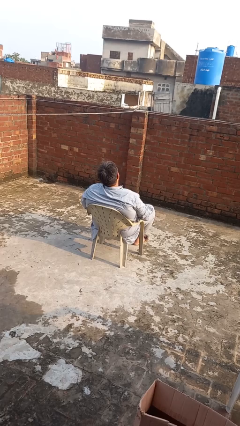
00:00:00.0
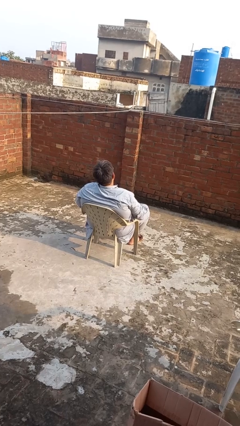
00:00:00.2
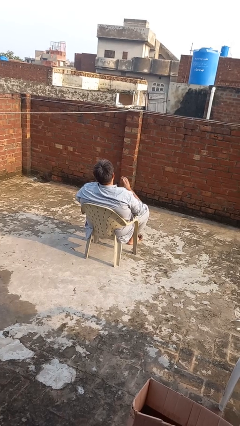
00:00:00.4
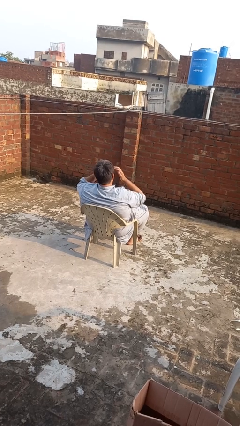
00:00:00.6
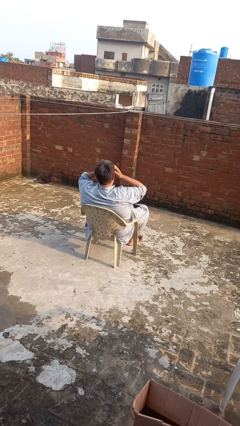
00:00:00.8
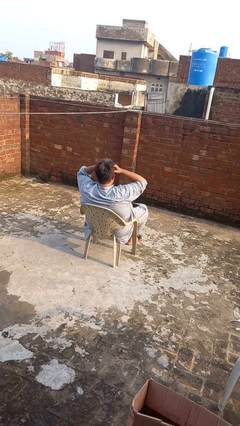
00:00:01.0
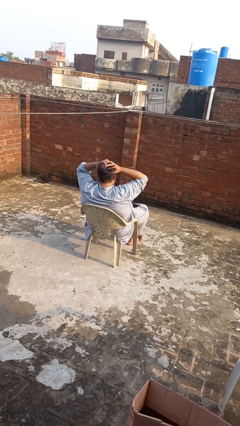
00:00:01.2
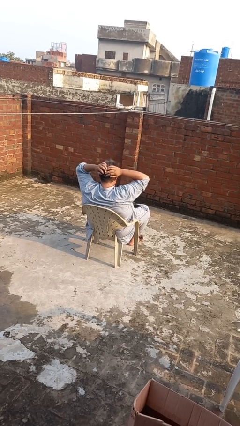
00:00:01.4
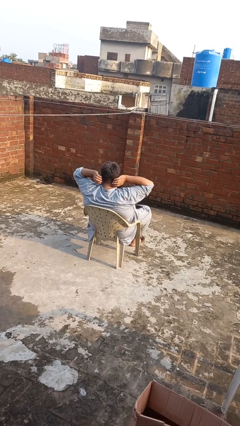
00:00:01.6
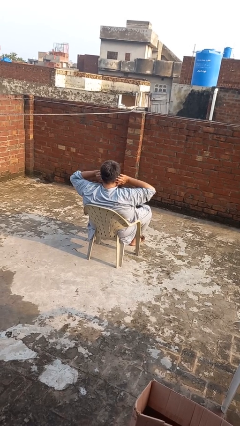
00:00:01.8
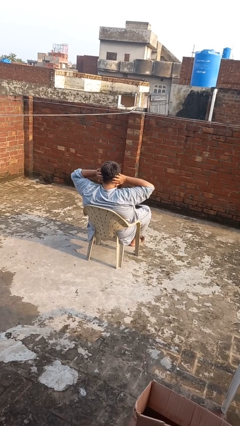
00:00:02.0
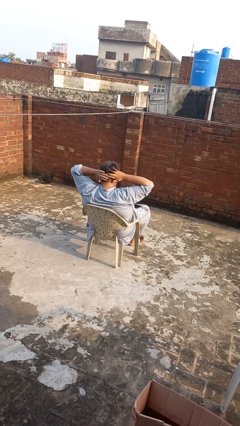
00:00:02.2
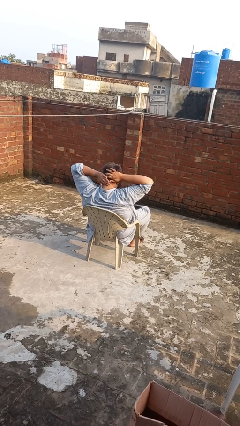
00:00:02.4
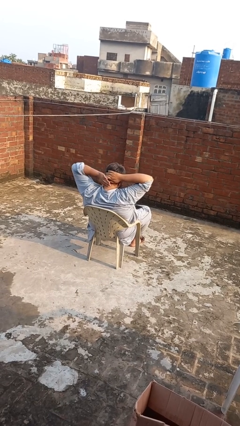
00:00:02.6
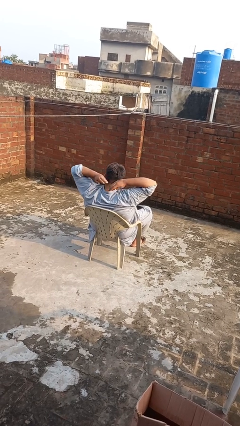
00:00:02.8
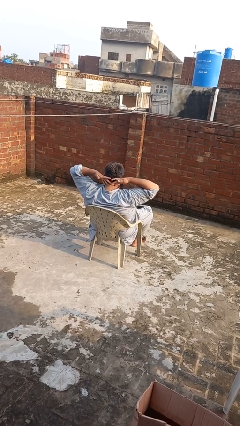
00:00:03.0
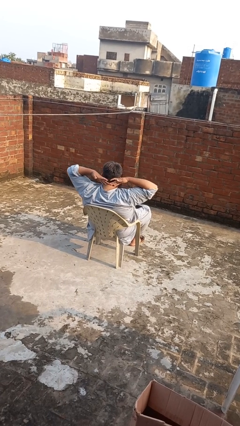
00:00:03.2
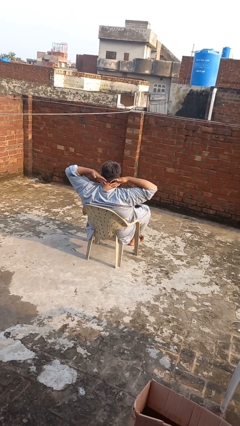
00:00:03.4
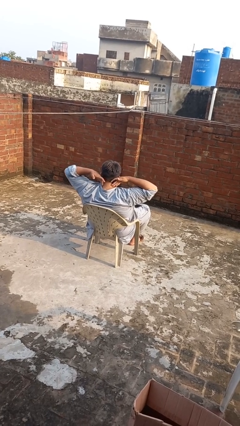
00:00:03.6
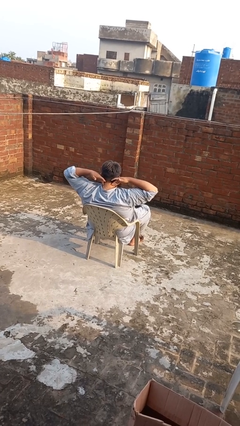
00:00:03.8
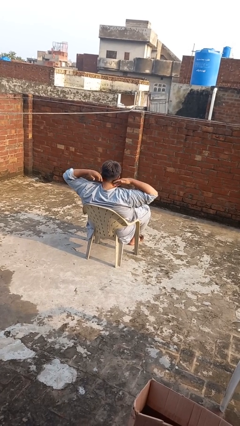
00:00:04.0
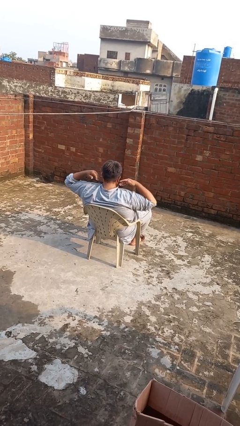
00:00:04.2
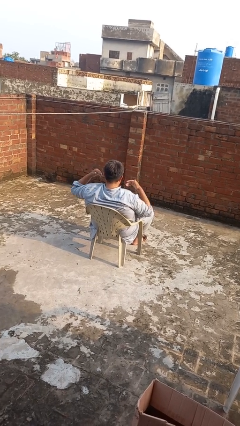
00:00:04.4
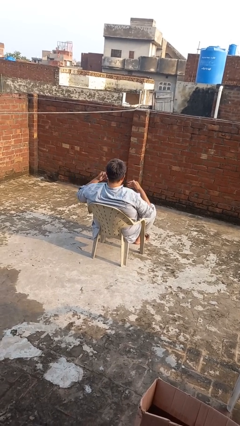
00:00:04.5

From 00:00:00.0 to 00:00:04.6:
person strokes hair

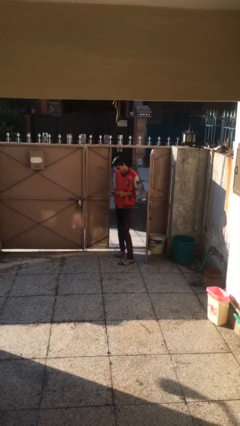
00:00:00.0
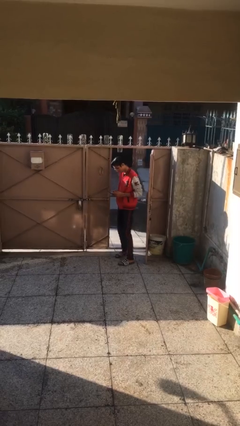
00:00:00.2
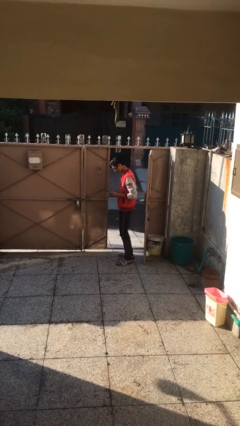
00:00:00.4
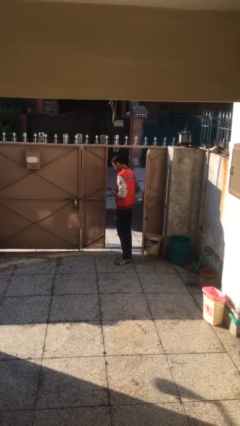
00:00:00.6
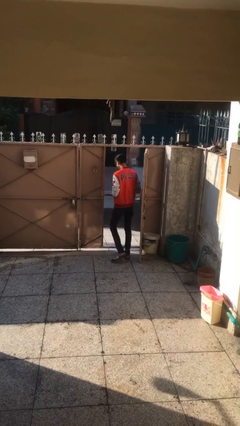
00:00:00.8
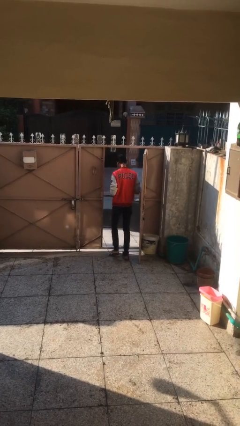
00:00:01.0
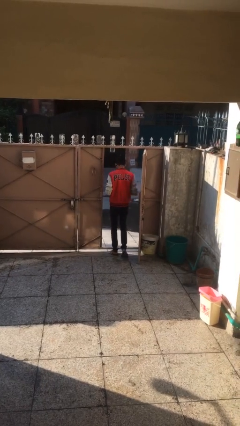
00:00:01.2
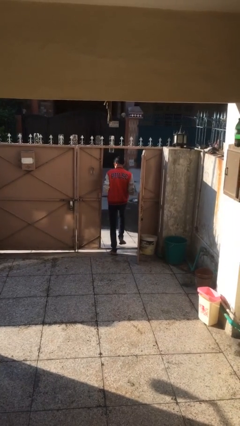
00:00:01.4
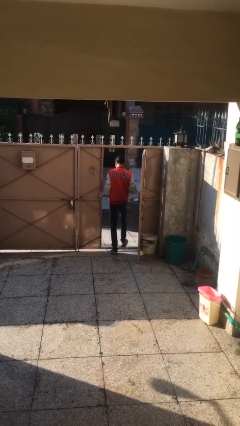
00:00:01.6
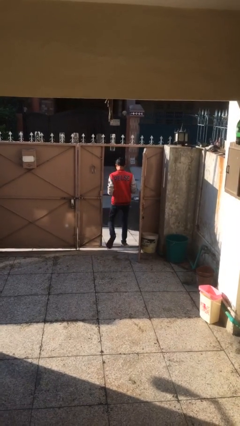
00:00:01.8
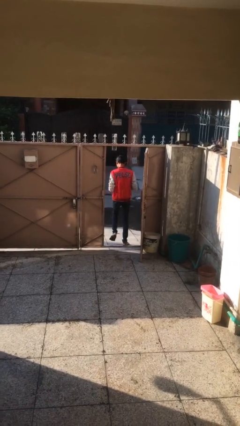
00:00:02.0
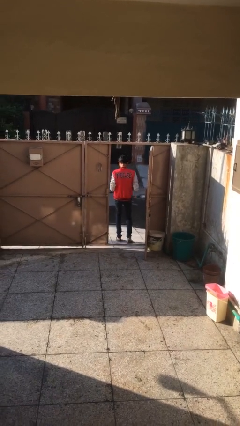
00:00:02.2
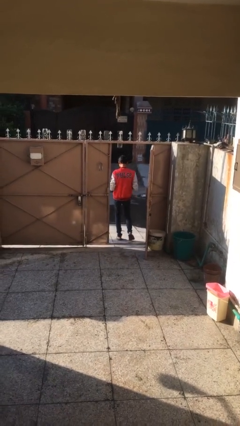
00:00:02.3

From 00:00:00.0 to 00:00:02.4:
person exits scene through structure

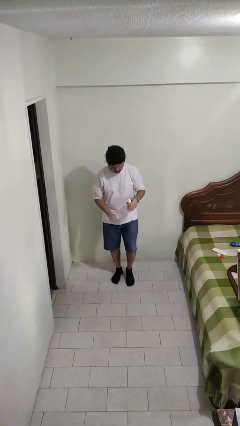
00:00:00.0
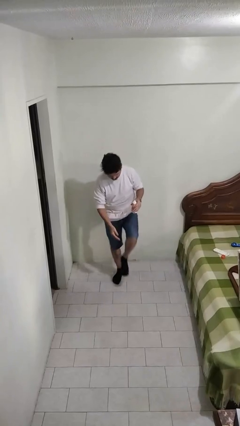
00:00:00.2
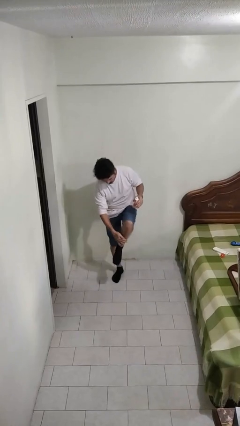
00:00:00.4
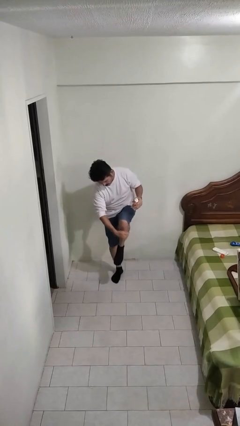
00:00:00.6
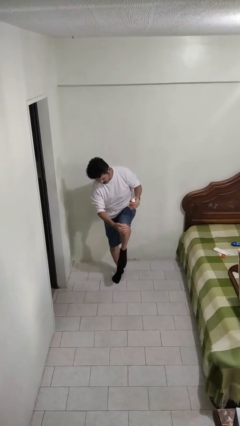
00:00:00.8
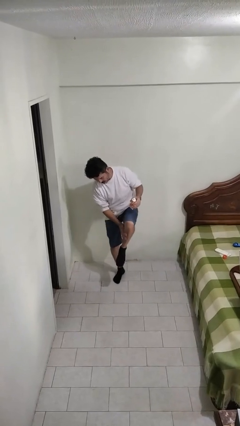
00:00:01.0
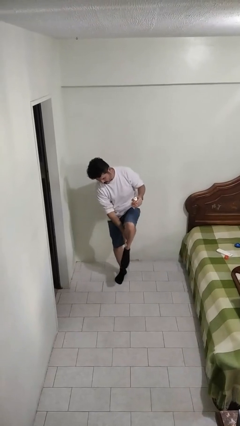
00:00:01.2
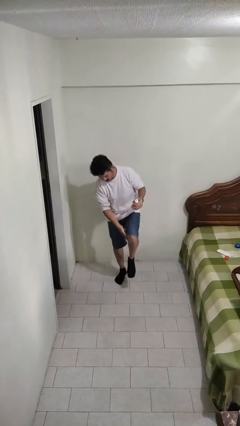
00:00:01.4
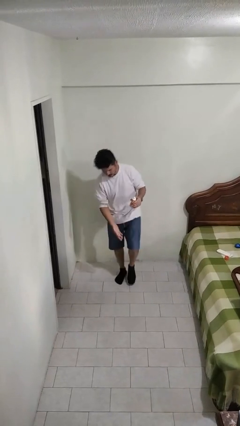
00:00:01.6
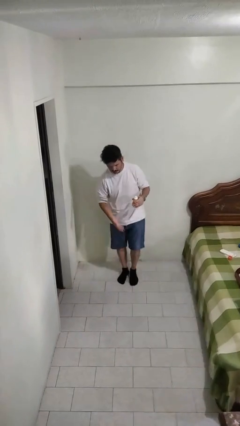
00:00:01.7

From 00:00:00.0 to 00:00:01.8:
person applies sunscreen

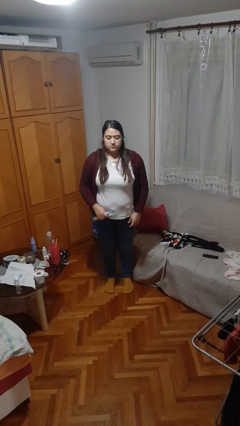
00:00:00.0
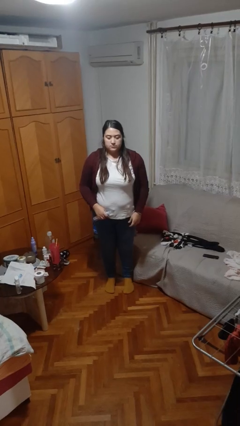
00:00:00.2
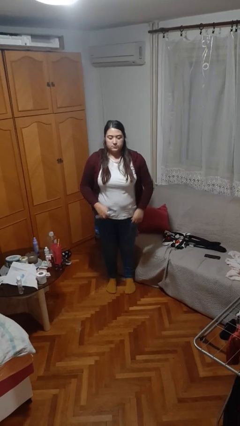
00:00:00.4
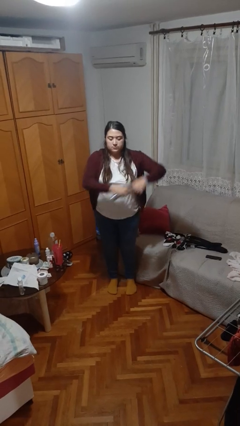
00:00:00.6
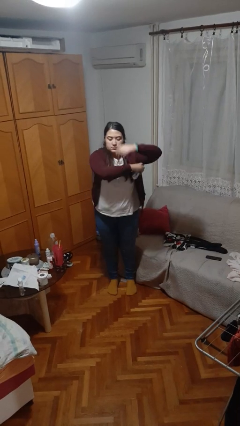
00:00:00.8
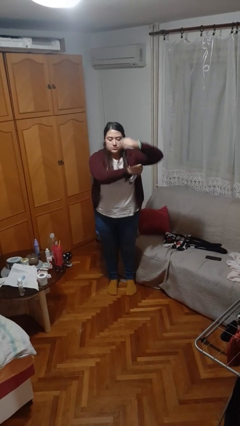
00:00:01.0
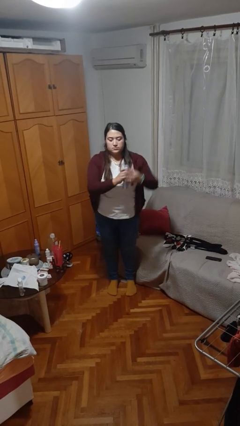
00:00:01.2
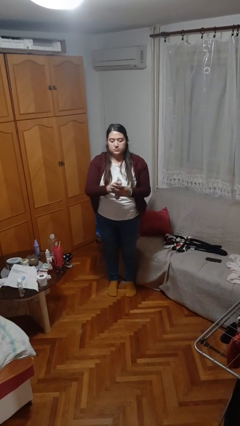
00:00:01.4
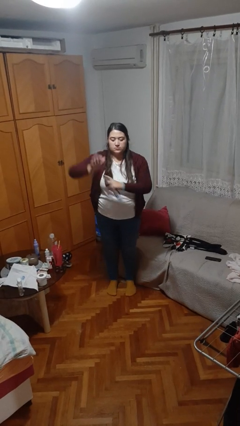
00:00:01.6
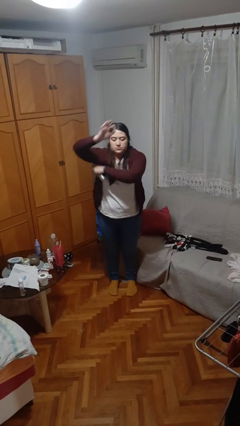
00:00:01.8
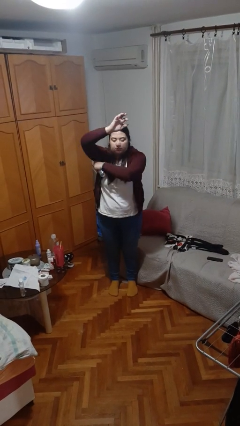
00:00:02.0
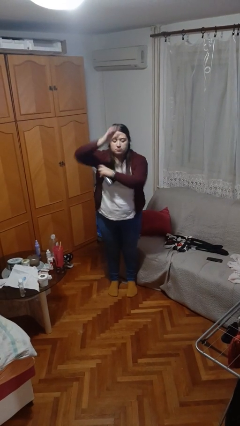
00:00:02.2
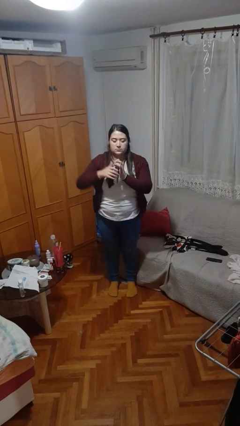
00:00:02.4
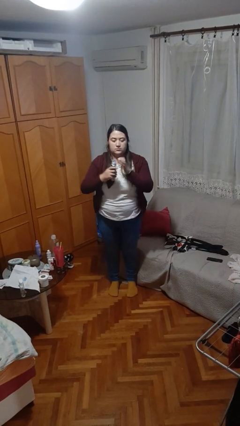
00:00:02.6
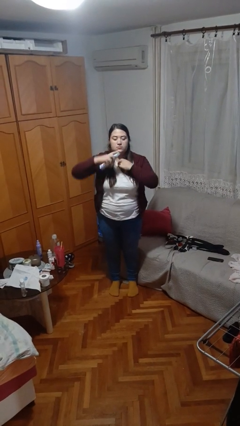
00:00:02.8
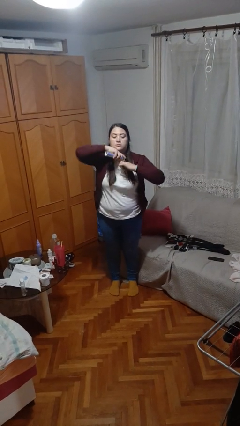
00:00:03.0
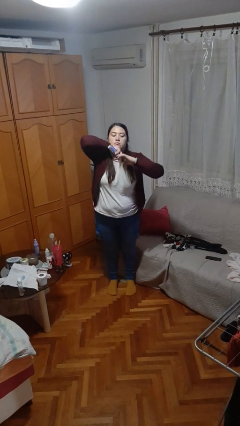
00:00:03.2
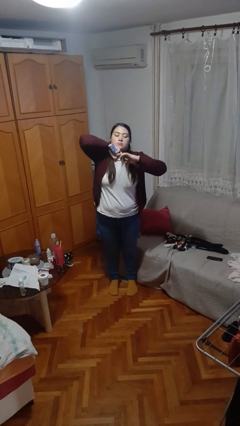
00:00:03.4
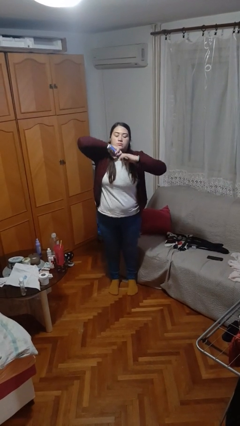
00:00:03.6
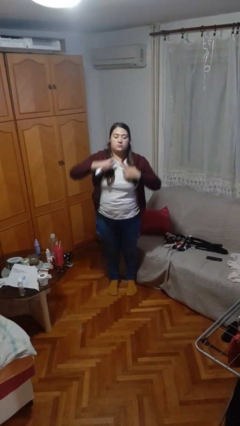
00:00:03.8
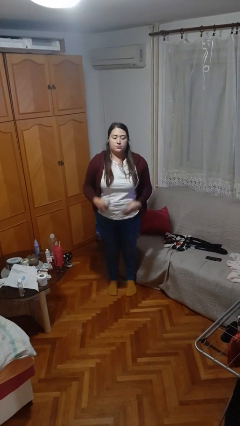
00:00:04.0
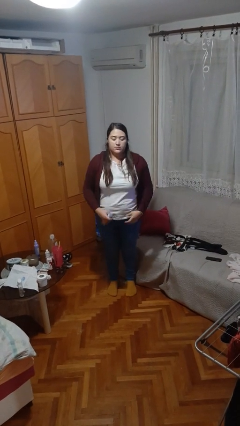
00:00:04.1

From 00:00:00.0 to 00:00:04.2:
person applies deodorant

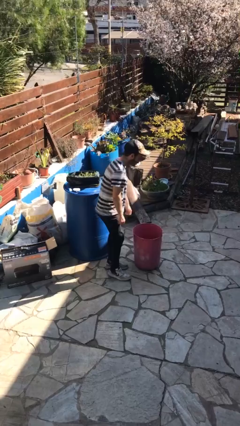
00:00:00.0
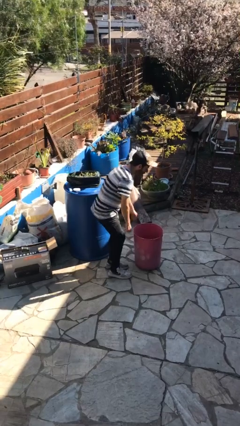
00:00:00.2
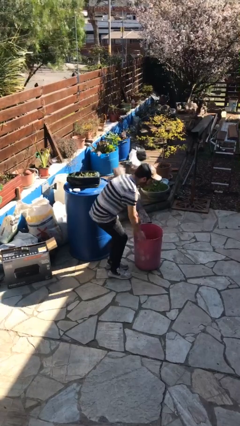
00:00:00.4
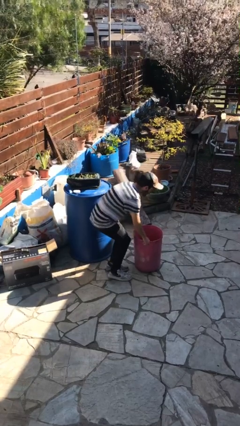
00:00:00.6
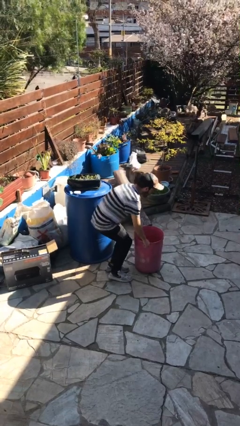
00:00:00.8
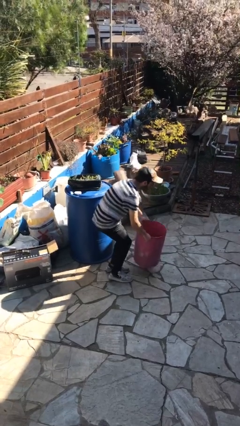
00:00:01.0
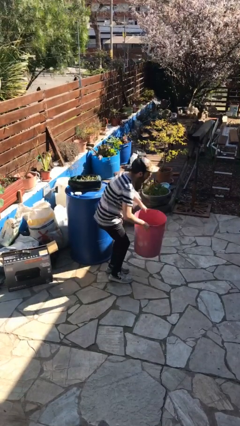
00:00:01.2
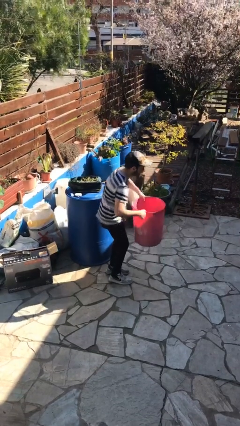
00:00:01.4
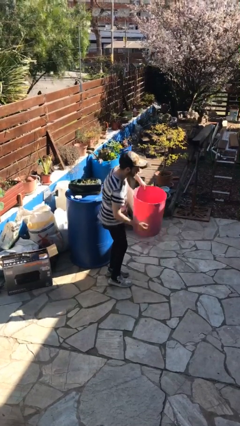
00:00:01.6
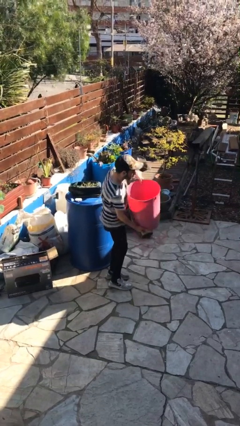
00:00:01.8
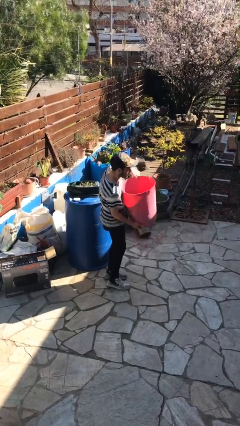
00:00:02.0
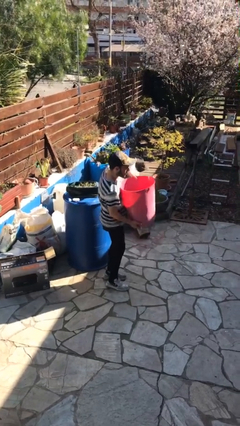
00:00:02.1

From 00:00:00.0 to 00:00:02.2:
person picks up object from floor

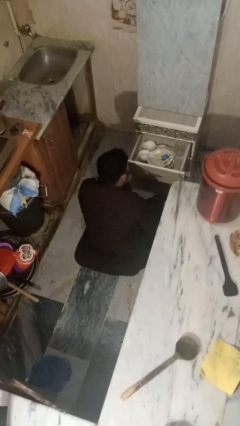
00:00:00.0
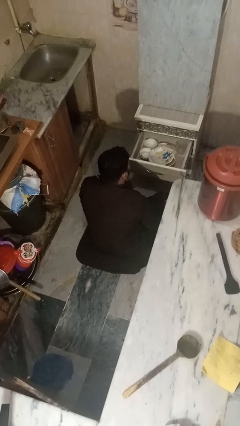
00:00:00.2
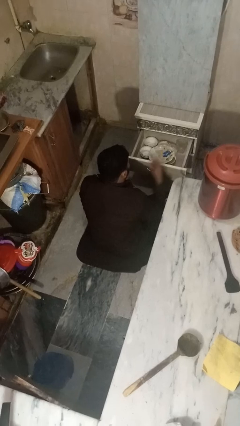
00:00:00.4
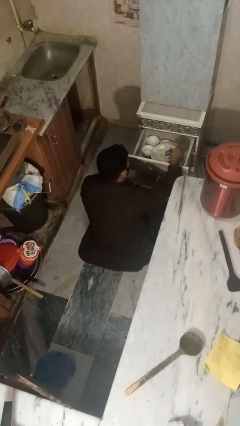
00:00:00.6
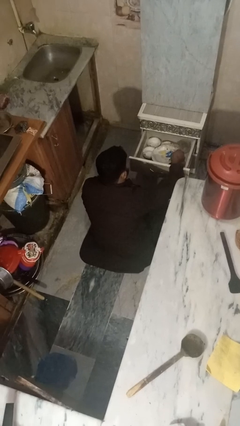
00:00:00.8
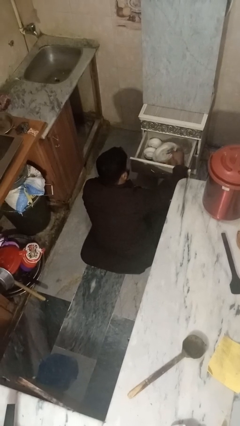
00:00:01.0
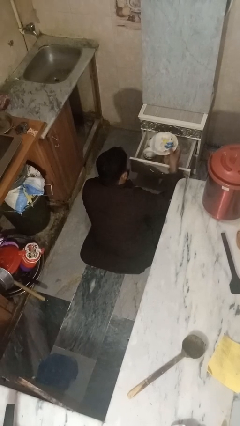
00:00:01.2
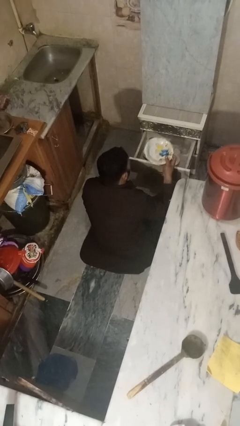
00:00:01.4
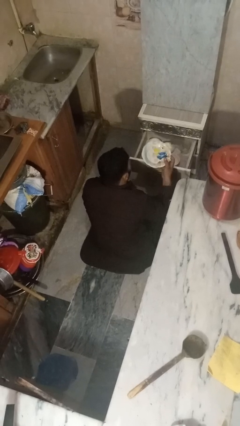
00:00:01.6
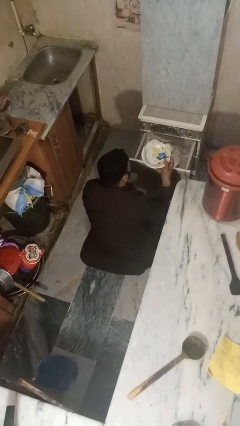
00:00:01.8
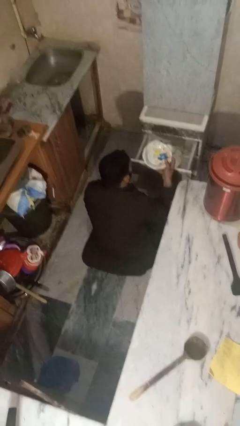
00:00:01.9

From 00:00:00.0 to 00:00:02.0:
person takes object from kitchen drawer
